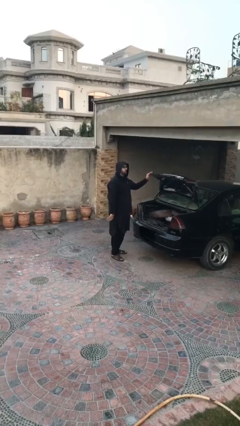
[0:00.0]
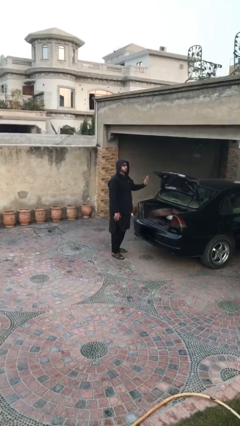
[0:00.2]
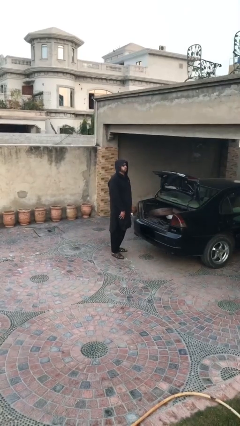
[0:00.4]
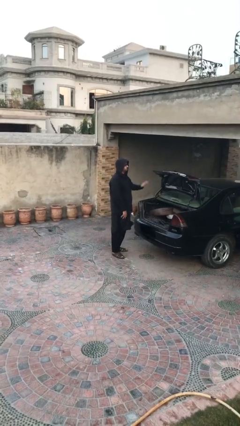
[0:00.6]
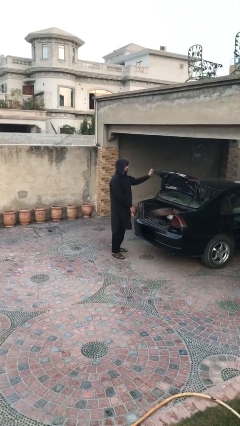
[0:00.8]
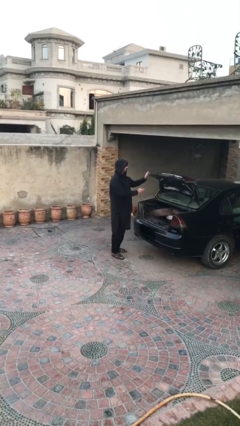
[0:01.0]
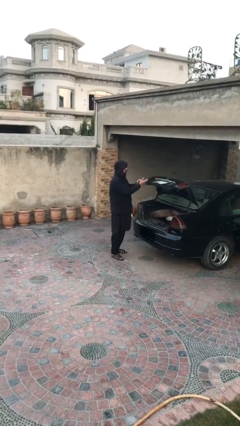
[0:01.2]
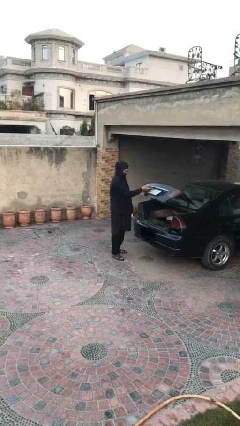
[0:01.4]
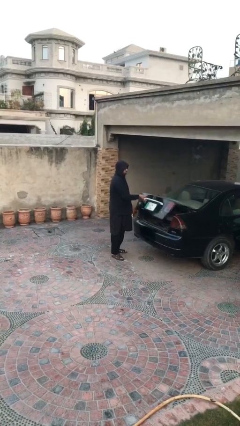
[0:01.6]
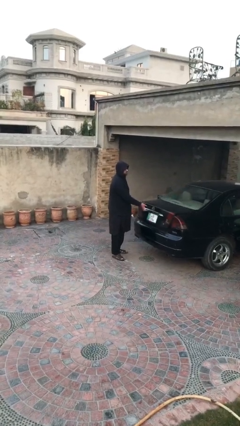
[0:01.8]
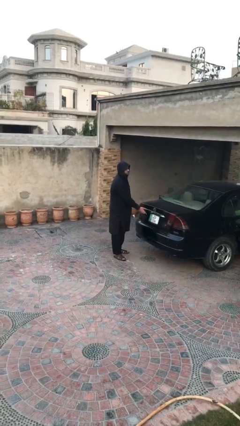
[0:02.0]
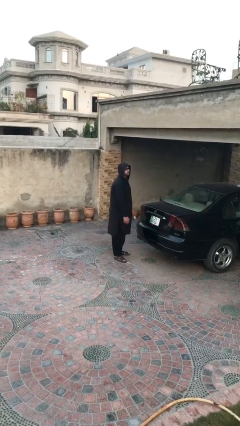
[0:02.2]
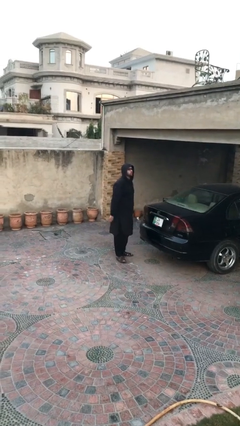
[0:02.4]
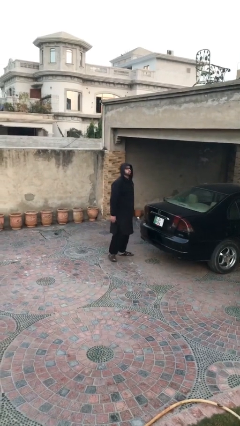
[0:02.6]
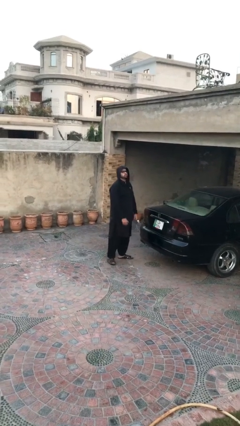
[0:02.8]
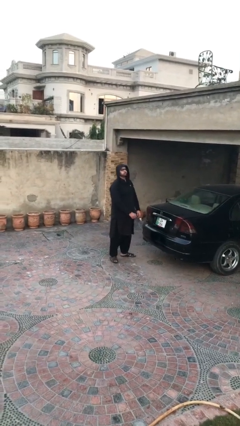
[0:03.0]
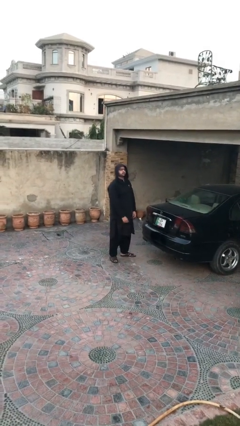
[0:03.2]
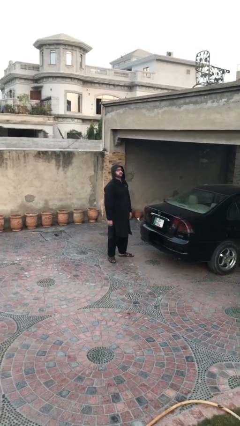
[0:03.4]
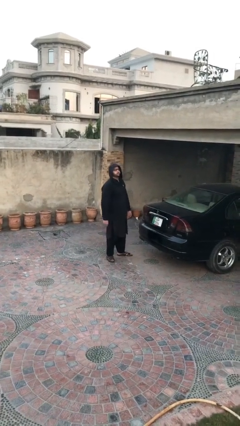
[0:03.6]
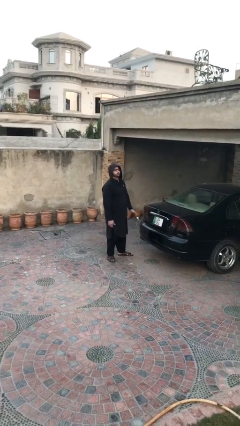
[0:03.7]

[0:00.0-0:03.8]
person closes car trunk

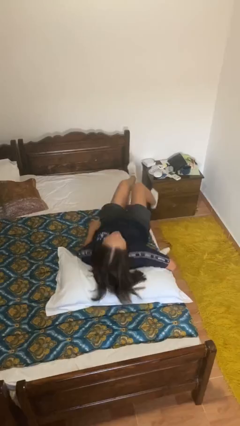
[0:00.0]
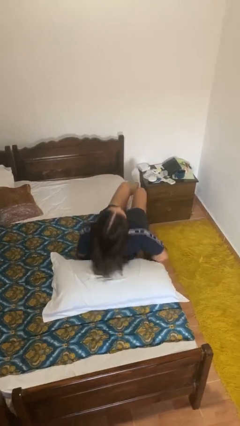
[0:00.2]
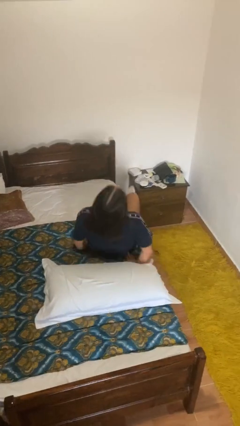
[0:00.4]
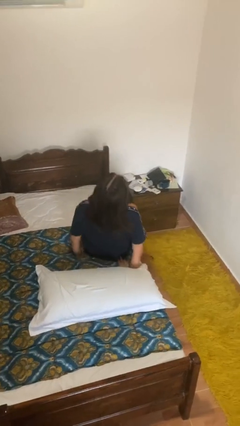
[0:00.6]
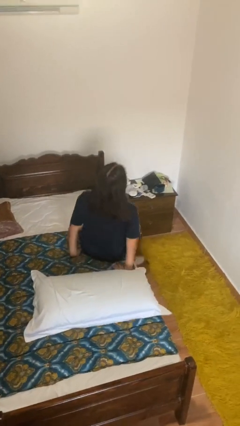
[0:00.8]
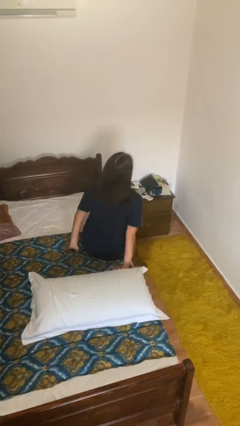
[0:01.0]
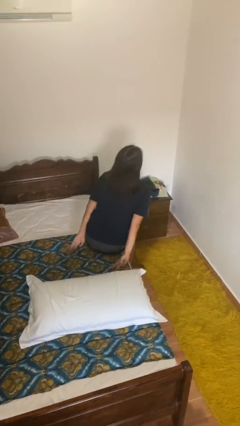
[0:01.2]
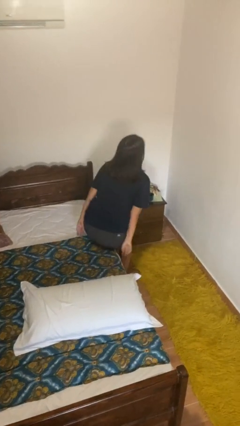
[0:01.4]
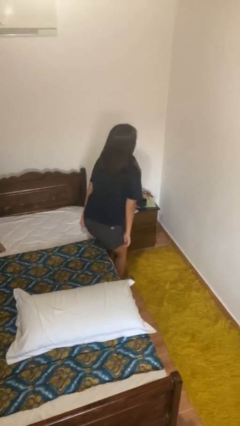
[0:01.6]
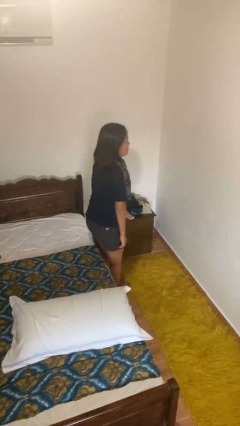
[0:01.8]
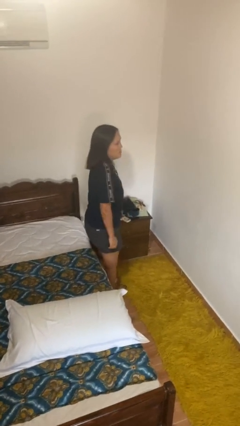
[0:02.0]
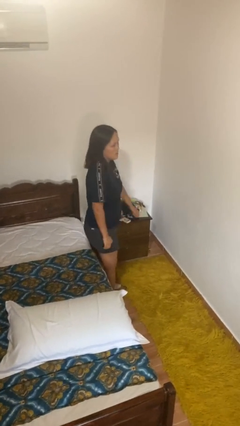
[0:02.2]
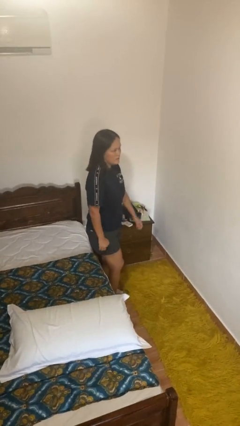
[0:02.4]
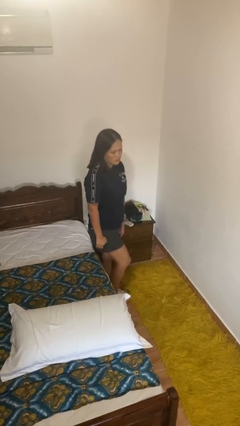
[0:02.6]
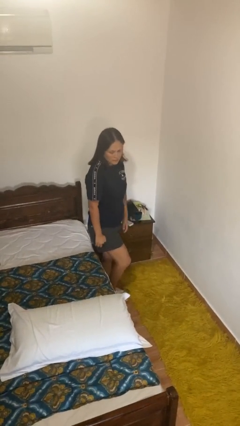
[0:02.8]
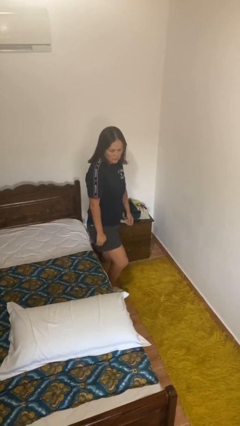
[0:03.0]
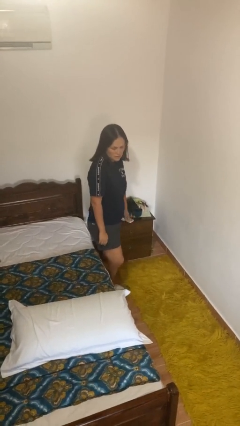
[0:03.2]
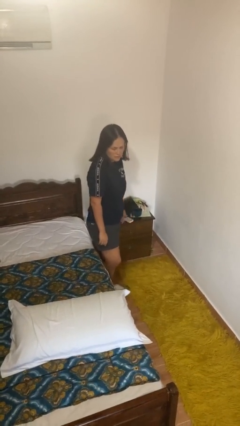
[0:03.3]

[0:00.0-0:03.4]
person stands up

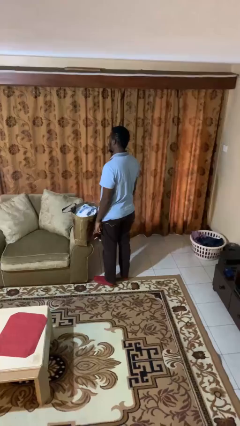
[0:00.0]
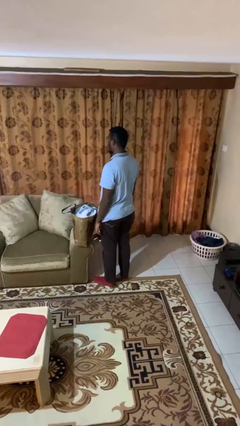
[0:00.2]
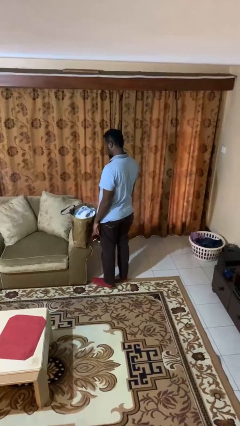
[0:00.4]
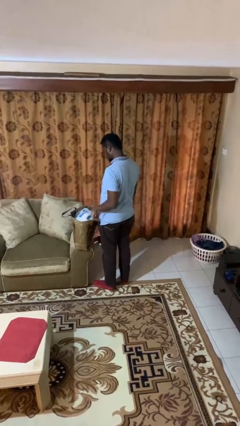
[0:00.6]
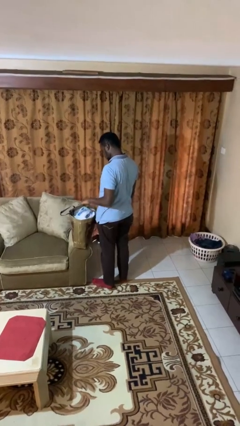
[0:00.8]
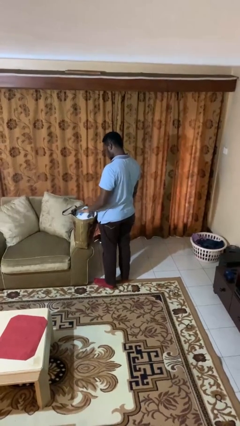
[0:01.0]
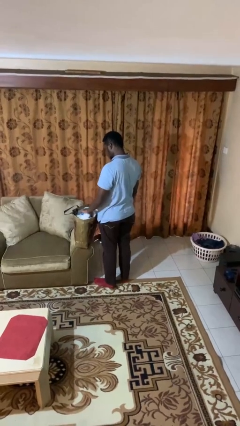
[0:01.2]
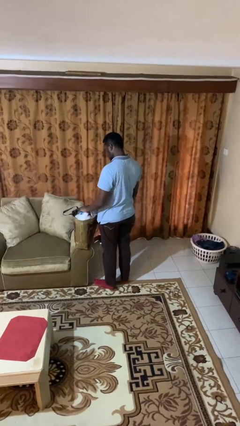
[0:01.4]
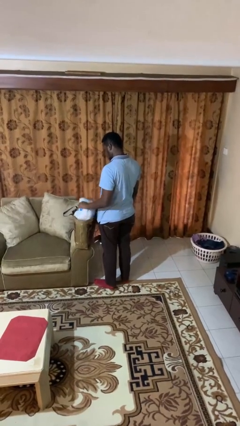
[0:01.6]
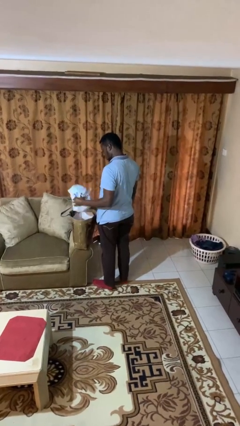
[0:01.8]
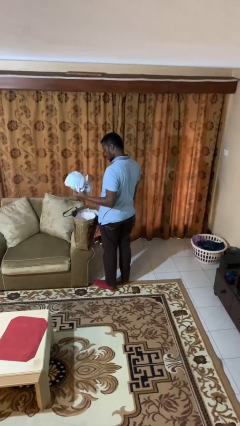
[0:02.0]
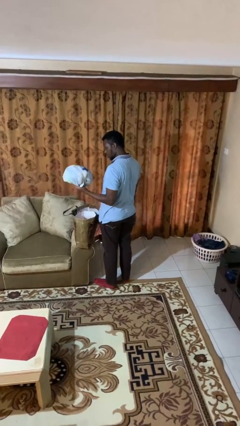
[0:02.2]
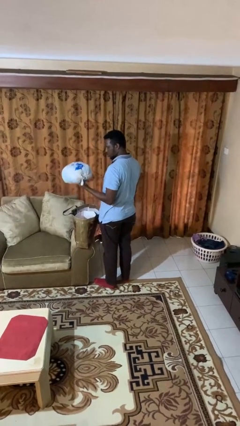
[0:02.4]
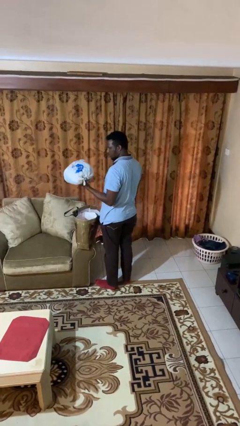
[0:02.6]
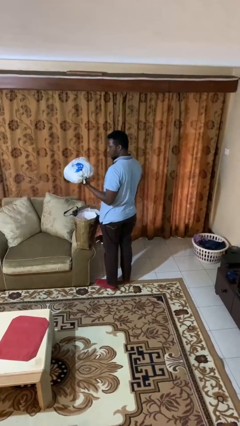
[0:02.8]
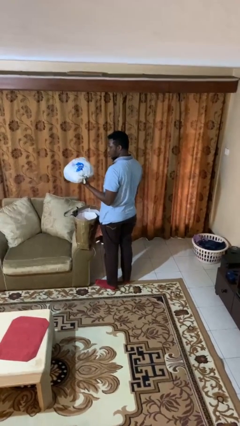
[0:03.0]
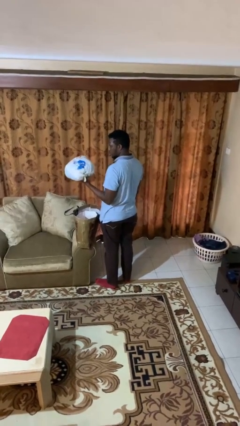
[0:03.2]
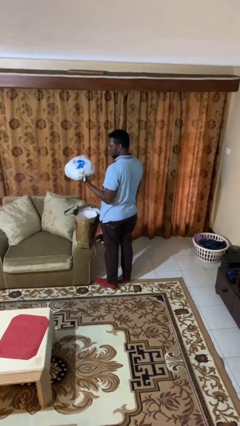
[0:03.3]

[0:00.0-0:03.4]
person takes object from bag

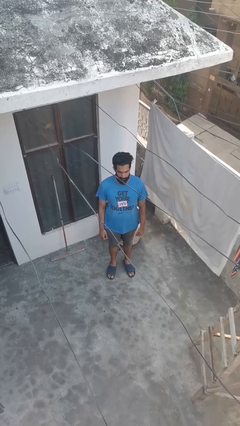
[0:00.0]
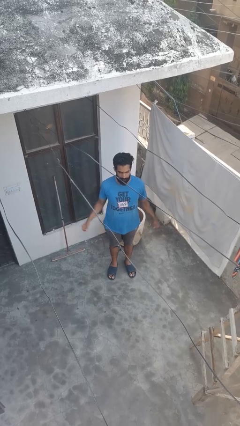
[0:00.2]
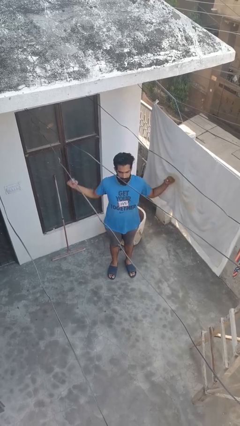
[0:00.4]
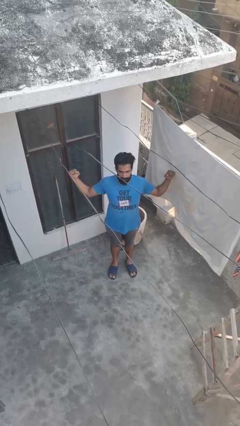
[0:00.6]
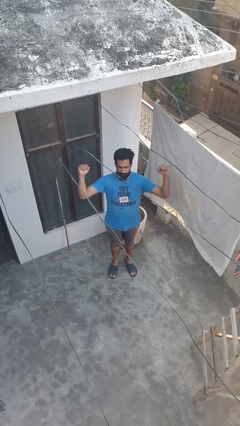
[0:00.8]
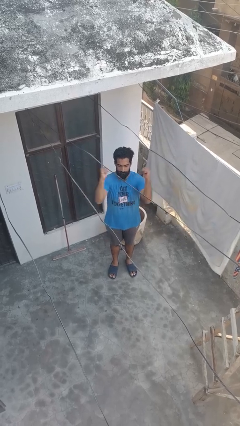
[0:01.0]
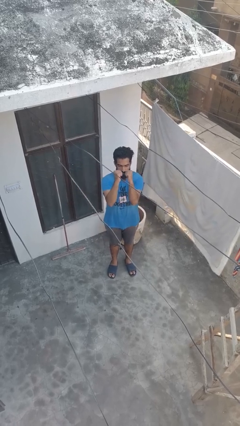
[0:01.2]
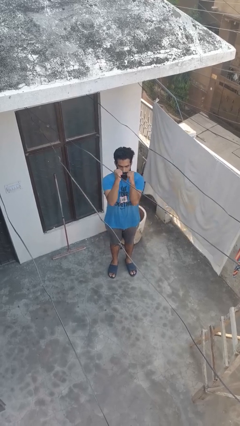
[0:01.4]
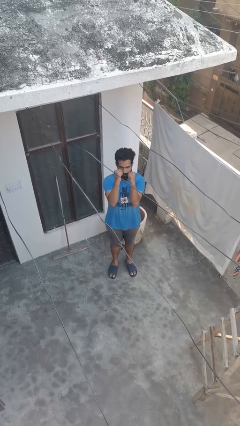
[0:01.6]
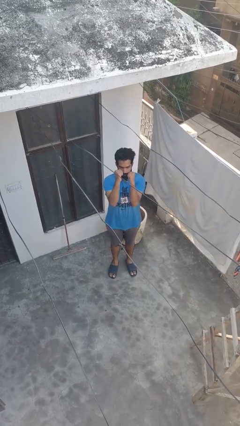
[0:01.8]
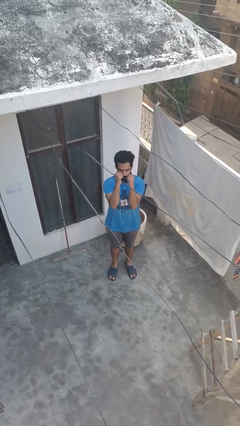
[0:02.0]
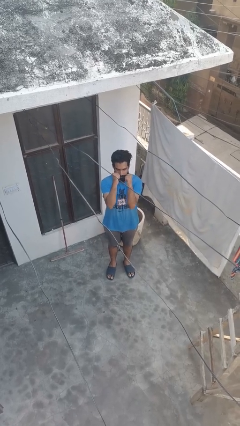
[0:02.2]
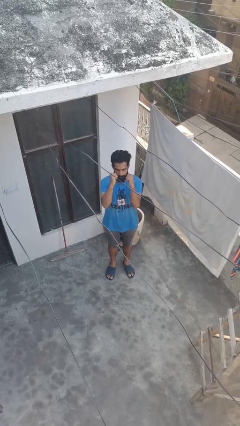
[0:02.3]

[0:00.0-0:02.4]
person gestures zoom in

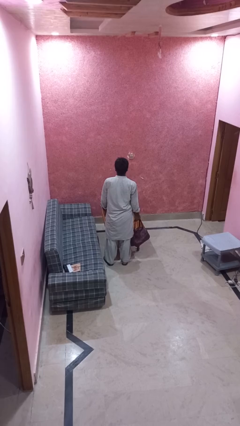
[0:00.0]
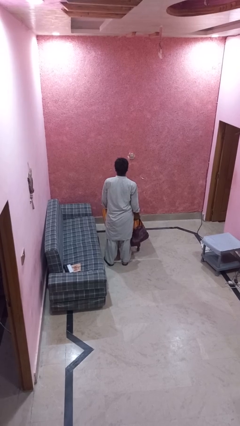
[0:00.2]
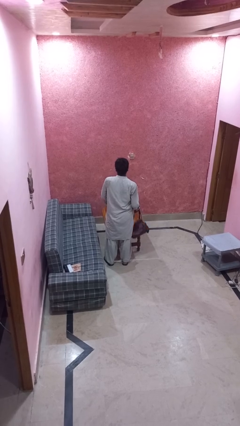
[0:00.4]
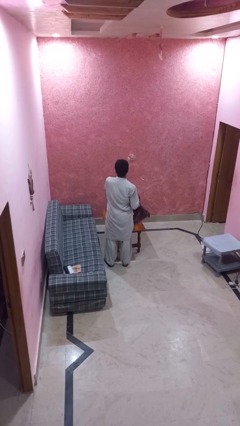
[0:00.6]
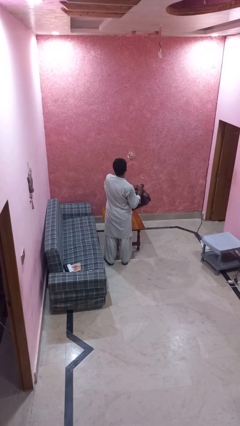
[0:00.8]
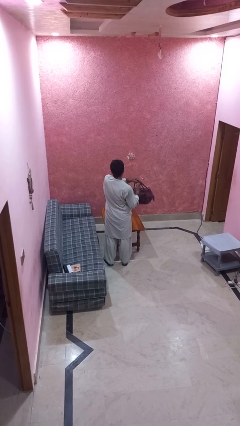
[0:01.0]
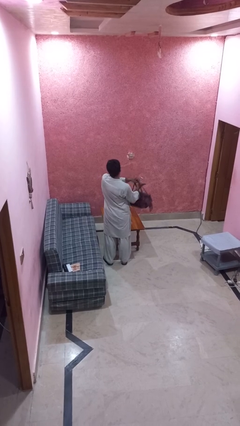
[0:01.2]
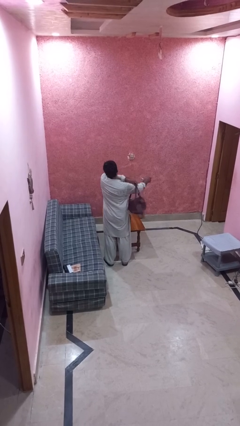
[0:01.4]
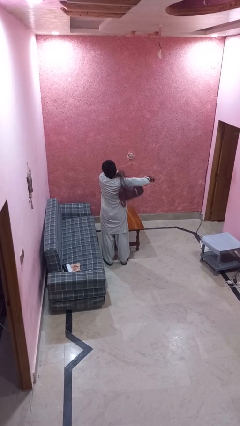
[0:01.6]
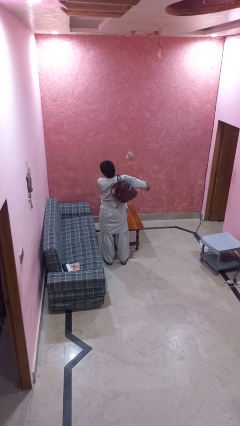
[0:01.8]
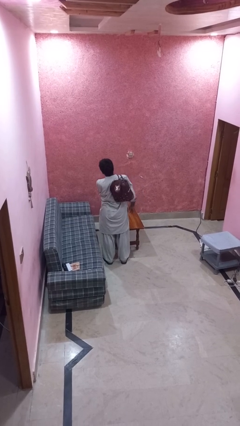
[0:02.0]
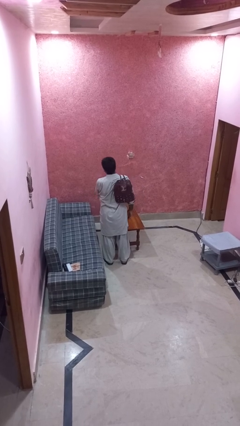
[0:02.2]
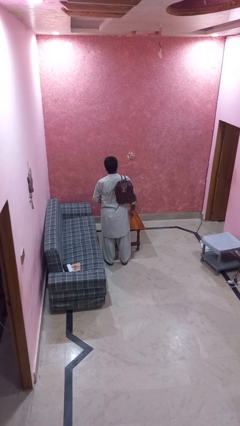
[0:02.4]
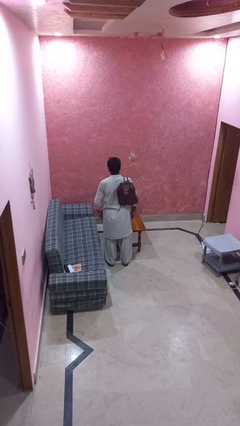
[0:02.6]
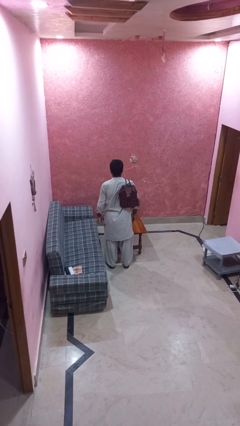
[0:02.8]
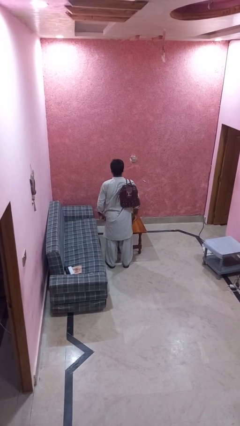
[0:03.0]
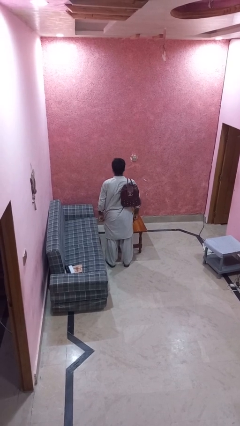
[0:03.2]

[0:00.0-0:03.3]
person puts on backpack

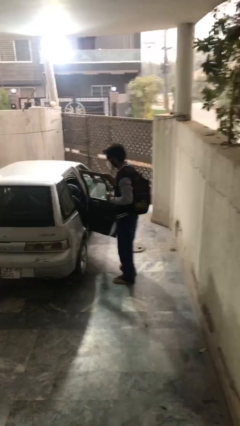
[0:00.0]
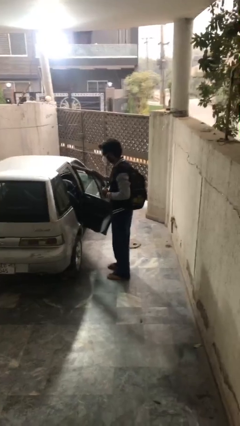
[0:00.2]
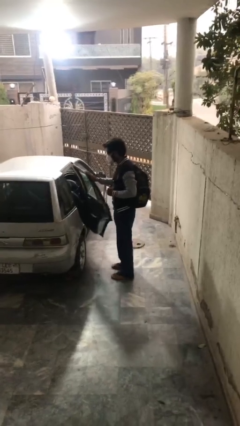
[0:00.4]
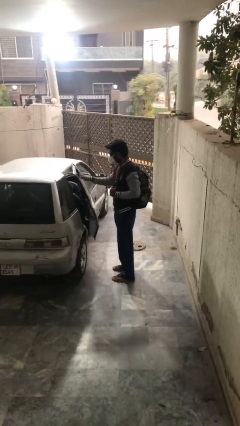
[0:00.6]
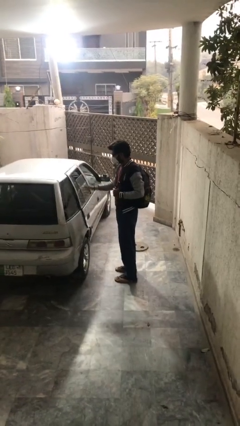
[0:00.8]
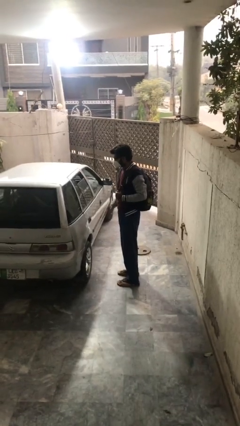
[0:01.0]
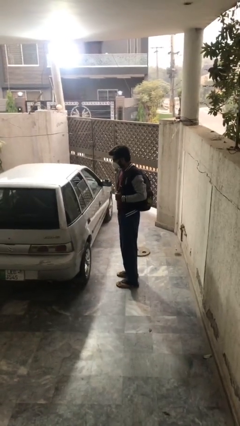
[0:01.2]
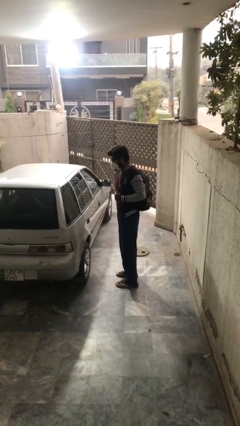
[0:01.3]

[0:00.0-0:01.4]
person closes car door
